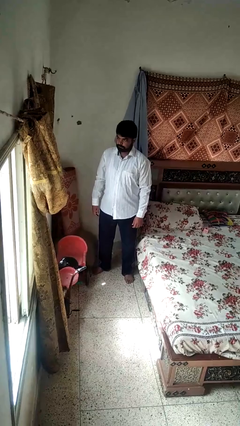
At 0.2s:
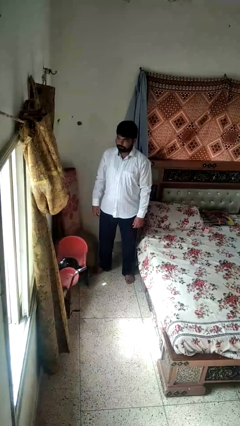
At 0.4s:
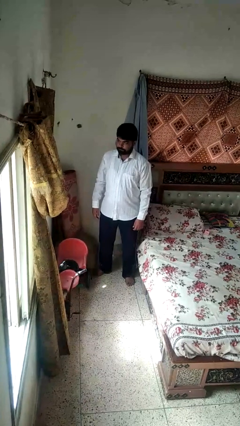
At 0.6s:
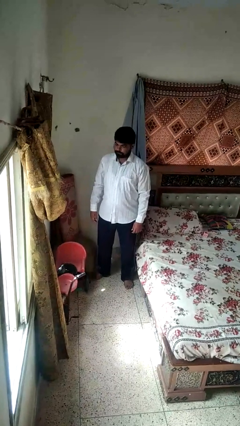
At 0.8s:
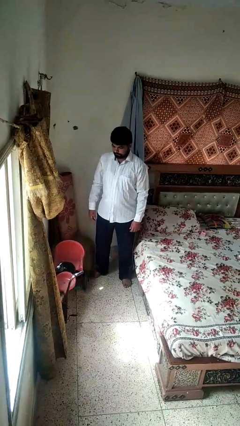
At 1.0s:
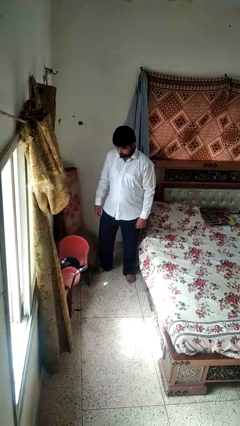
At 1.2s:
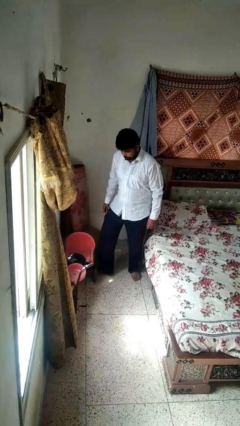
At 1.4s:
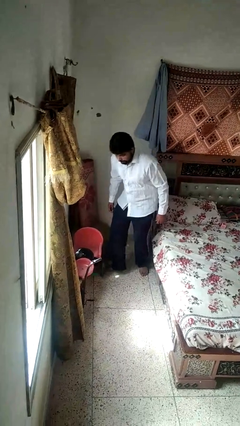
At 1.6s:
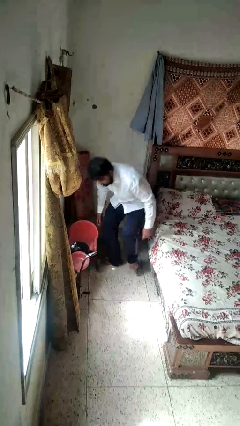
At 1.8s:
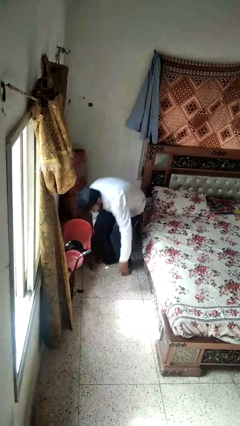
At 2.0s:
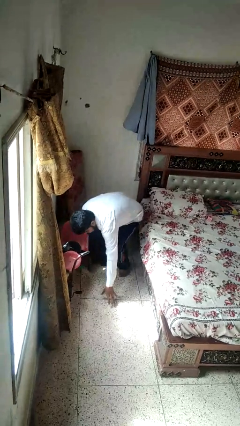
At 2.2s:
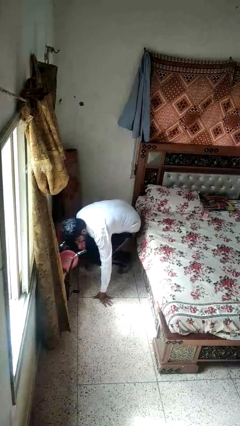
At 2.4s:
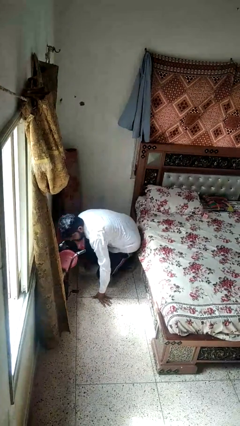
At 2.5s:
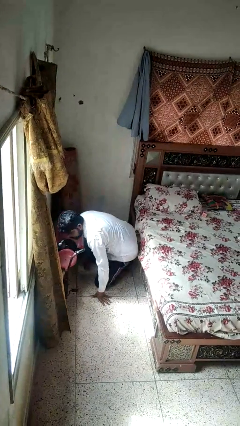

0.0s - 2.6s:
person trips on object on floor

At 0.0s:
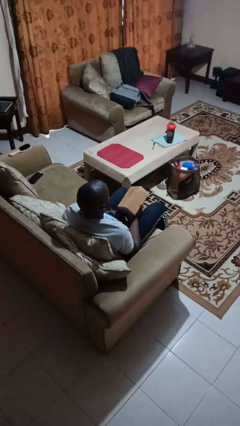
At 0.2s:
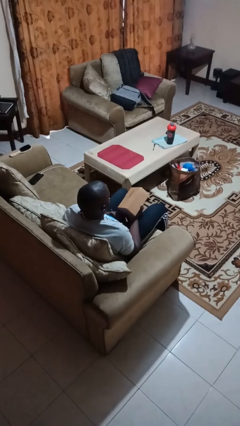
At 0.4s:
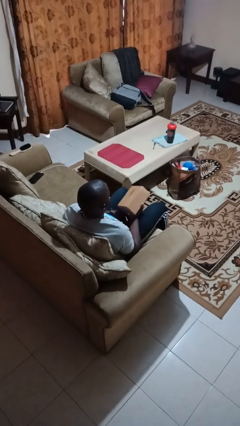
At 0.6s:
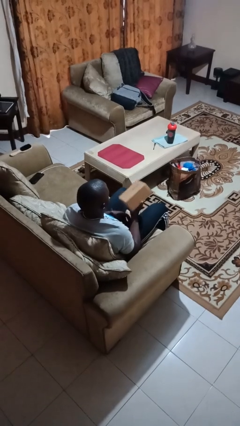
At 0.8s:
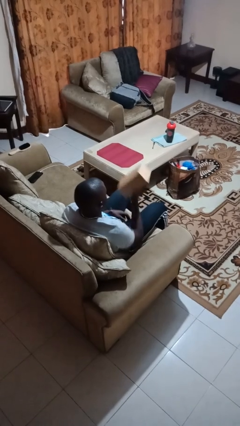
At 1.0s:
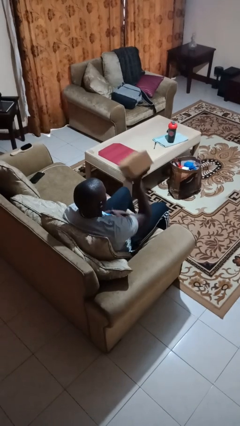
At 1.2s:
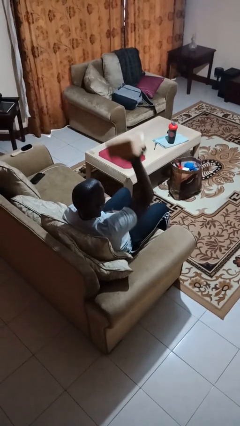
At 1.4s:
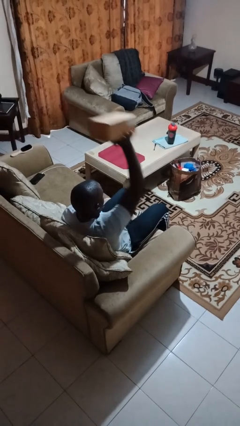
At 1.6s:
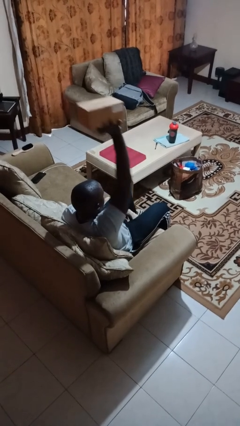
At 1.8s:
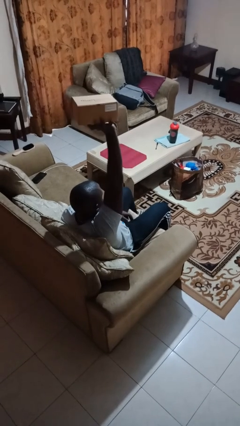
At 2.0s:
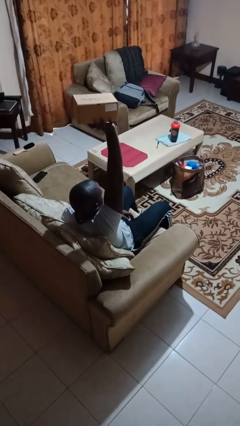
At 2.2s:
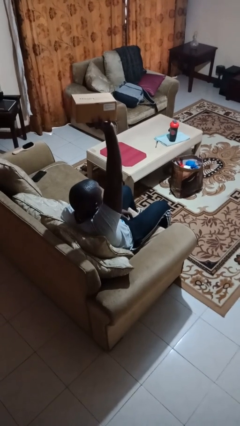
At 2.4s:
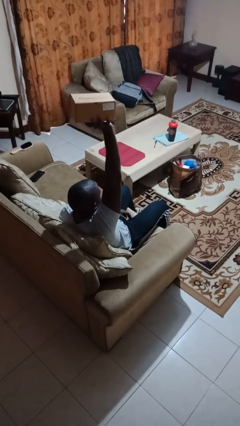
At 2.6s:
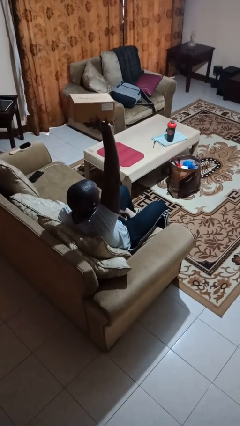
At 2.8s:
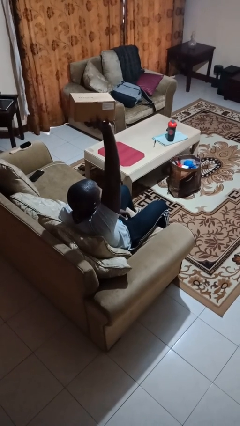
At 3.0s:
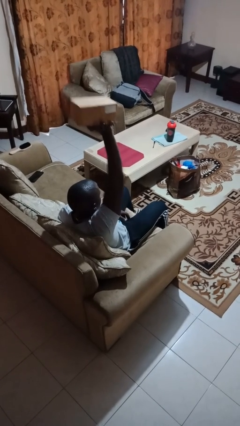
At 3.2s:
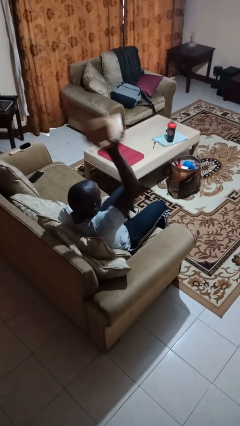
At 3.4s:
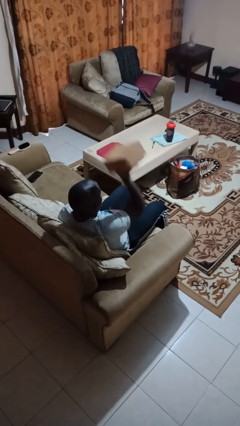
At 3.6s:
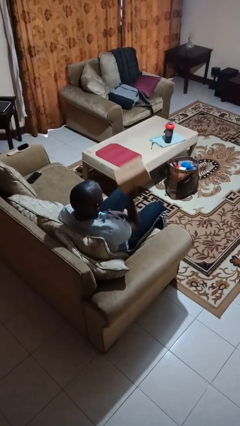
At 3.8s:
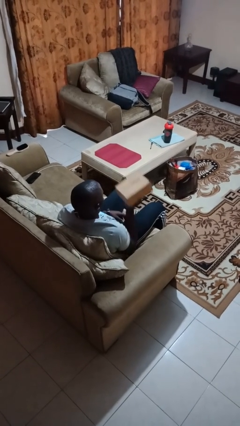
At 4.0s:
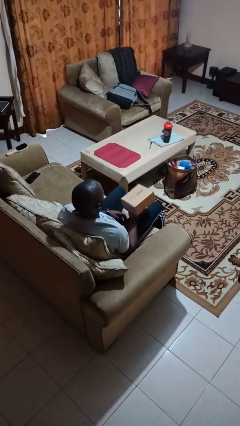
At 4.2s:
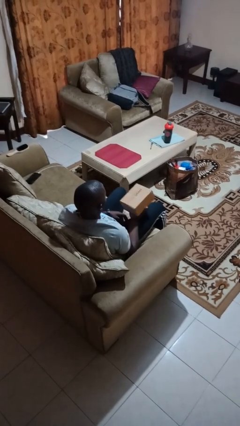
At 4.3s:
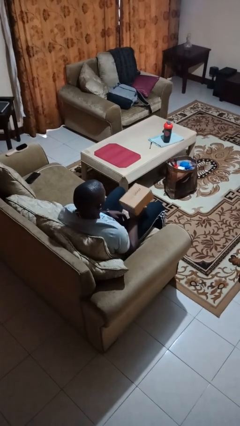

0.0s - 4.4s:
person holds object above head

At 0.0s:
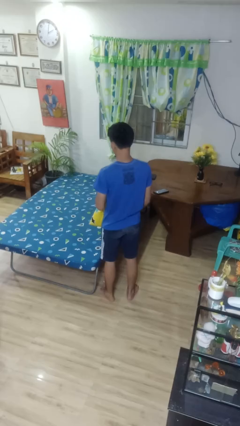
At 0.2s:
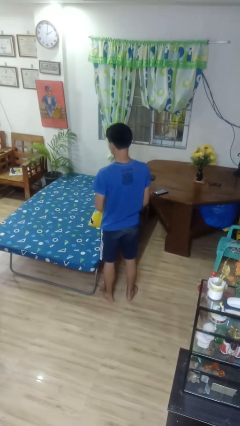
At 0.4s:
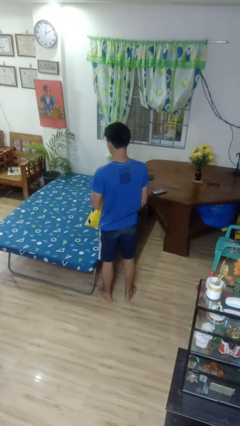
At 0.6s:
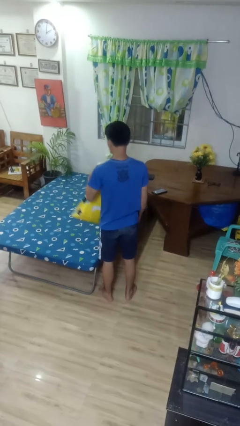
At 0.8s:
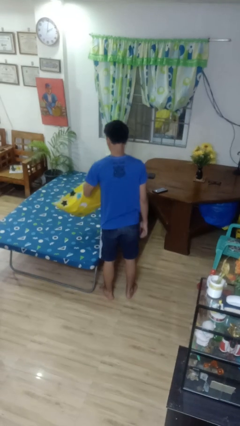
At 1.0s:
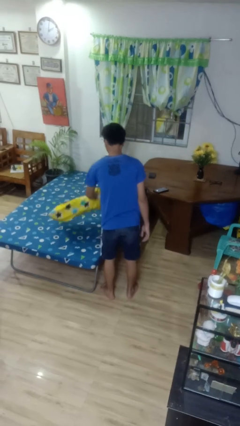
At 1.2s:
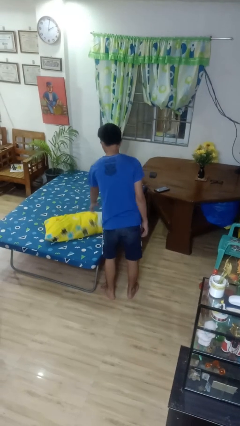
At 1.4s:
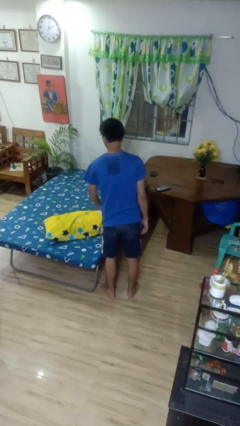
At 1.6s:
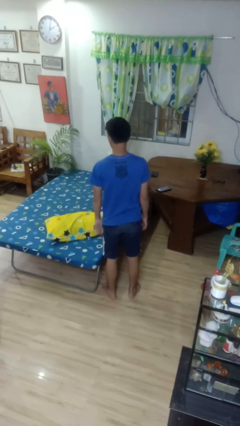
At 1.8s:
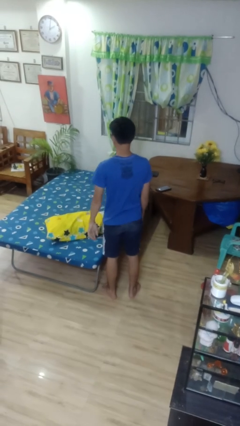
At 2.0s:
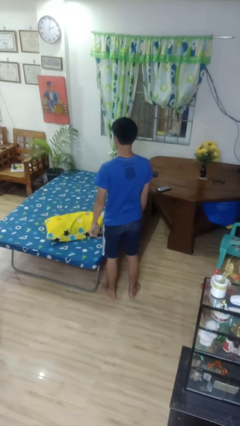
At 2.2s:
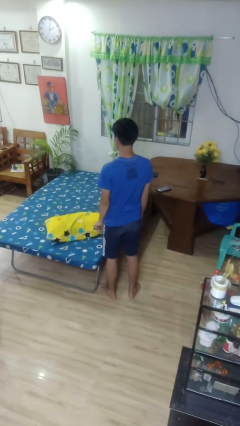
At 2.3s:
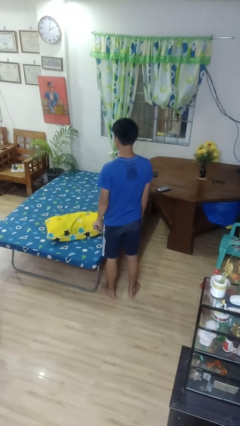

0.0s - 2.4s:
person puts down object on bed

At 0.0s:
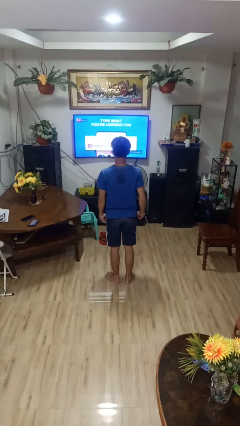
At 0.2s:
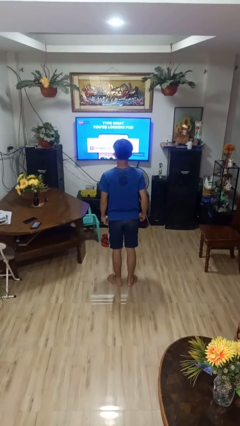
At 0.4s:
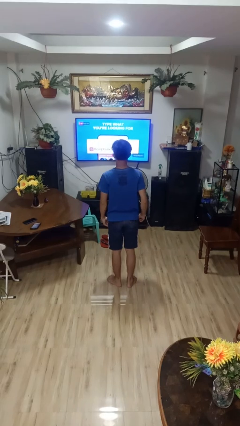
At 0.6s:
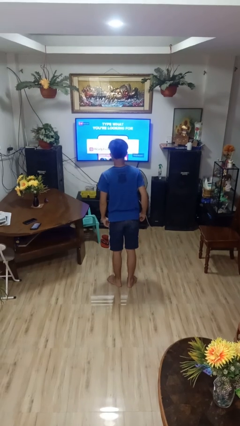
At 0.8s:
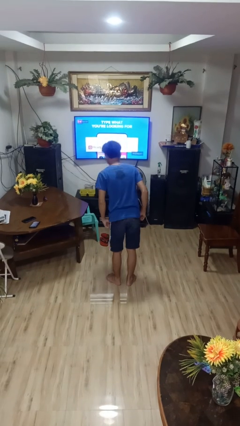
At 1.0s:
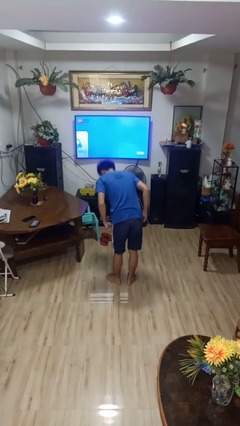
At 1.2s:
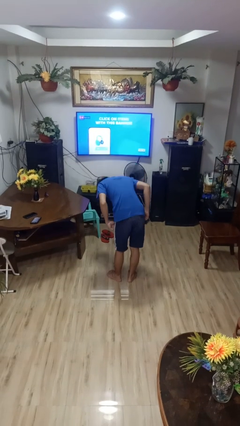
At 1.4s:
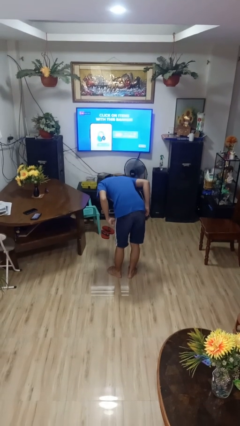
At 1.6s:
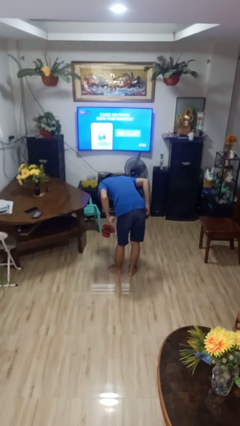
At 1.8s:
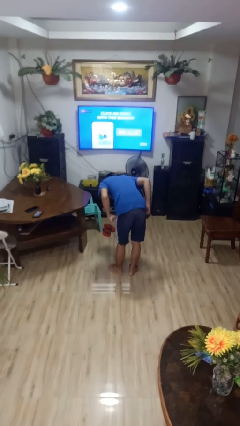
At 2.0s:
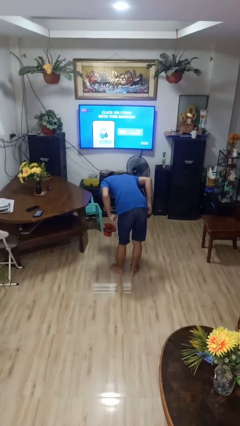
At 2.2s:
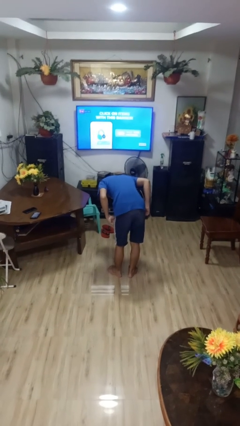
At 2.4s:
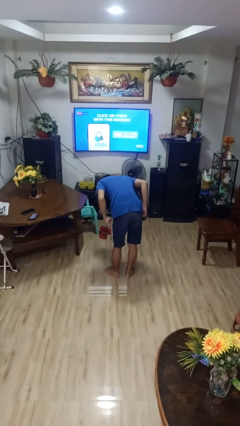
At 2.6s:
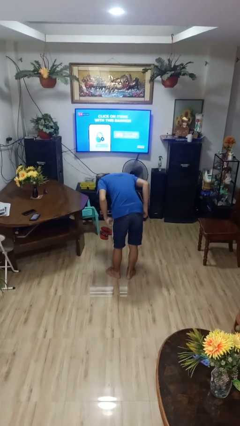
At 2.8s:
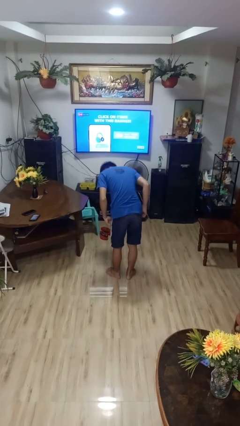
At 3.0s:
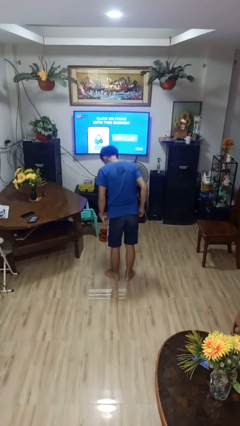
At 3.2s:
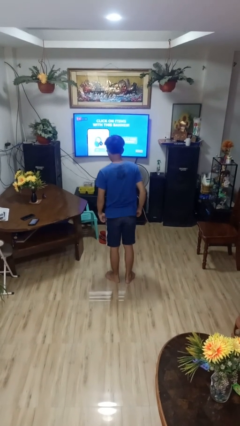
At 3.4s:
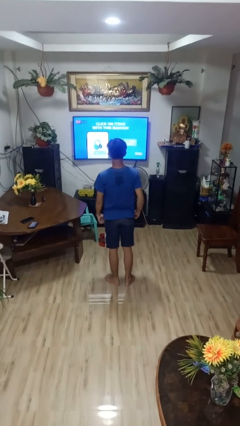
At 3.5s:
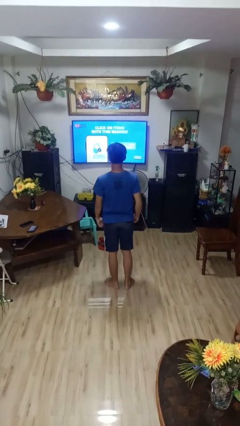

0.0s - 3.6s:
person bows

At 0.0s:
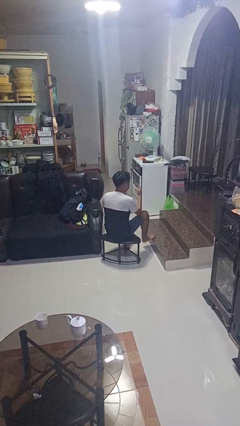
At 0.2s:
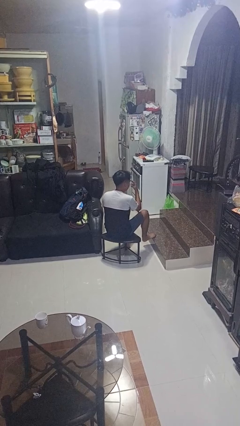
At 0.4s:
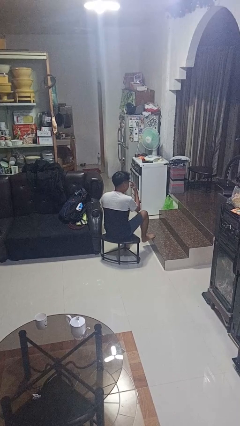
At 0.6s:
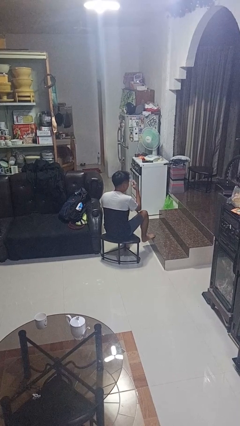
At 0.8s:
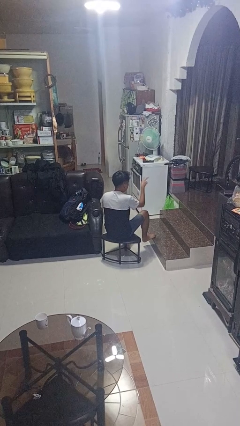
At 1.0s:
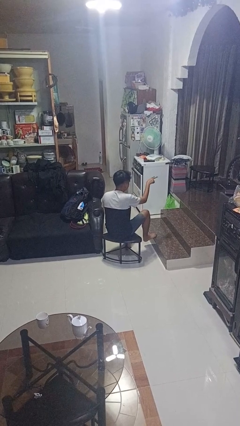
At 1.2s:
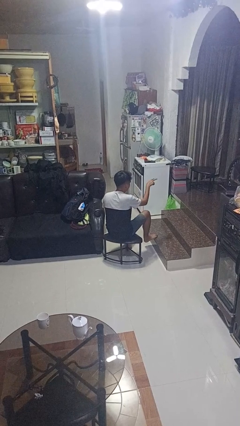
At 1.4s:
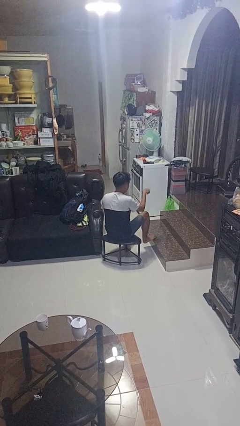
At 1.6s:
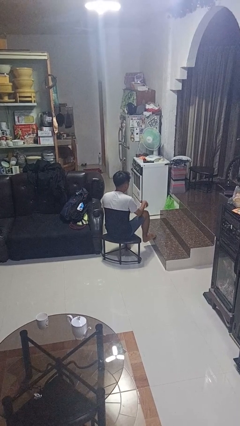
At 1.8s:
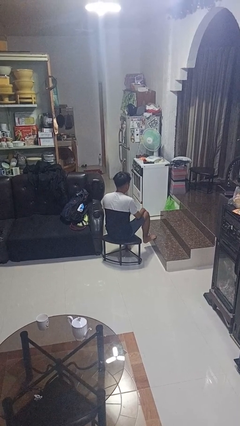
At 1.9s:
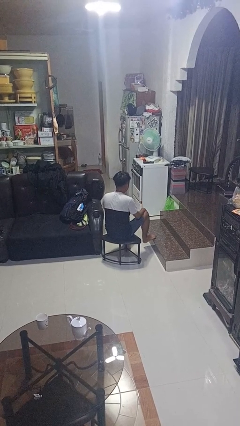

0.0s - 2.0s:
person gestures watch closely

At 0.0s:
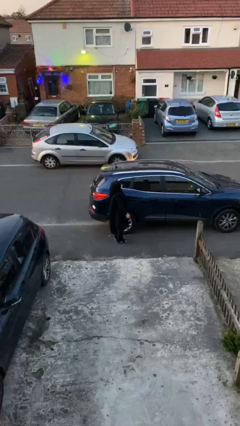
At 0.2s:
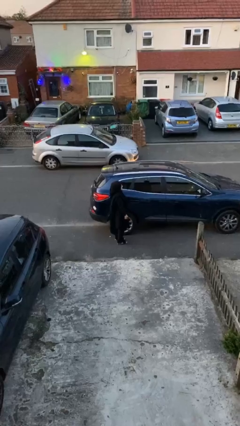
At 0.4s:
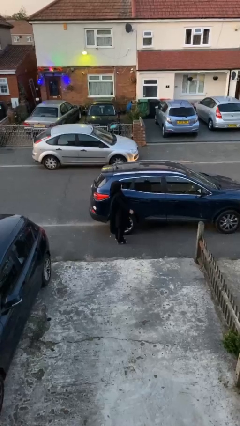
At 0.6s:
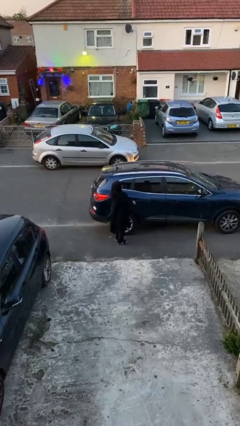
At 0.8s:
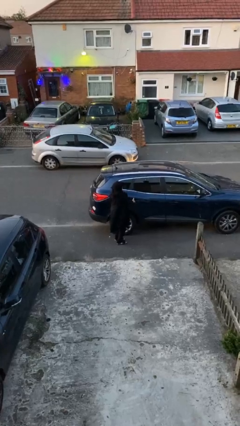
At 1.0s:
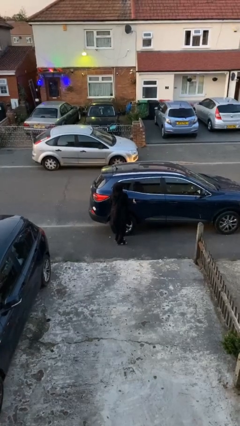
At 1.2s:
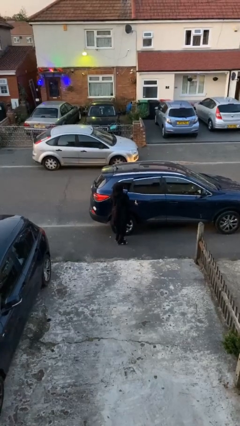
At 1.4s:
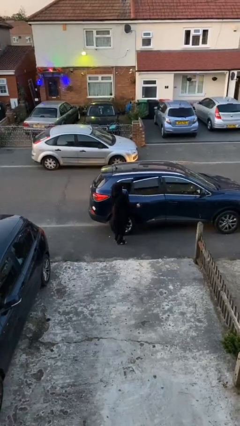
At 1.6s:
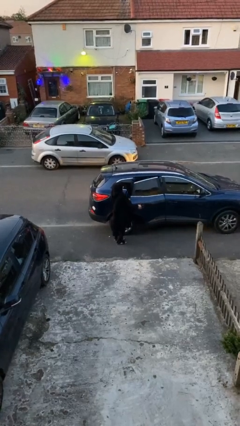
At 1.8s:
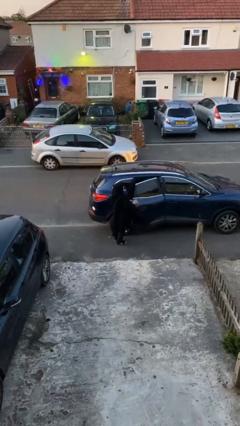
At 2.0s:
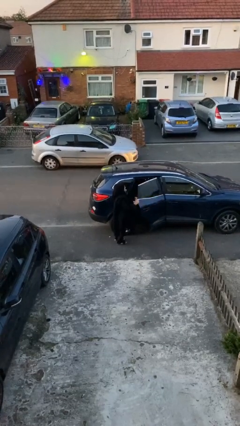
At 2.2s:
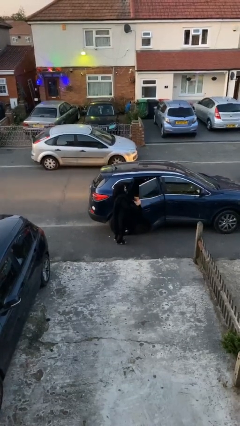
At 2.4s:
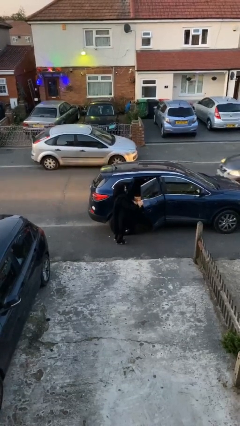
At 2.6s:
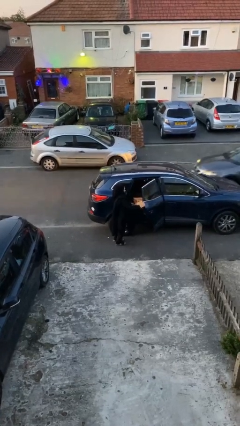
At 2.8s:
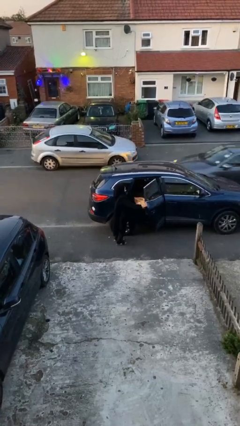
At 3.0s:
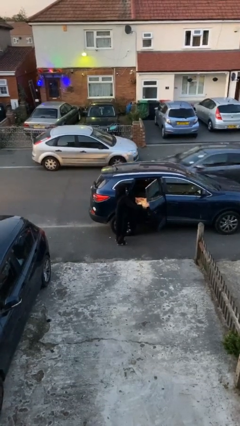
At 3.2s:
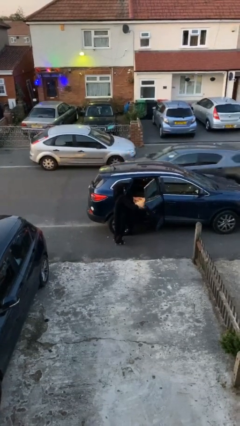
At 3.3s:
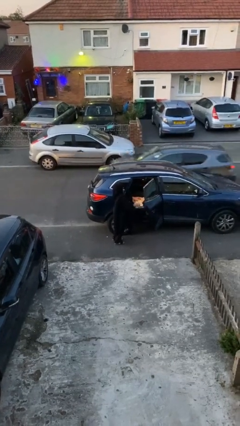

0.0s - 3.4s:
person opens car door
